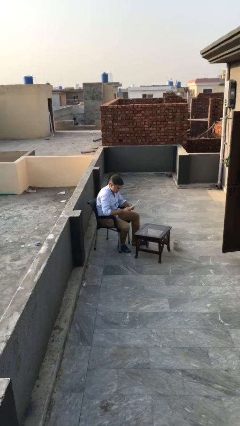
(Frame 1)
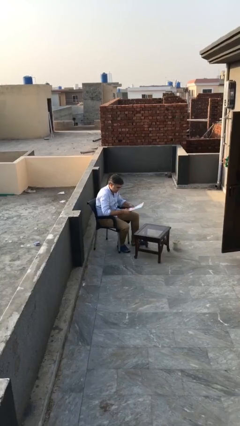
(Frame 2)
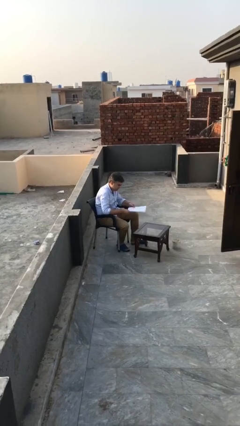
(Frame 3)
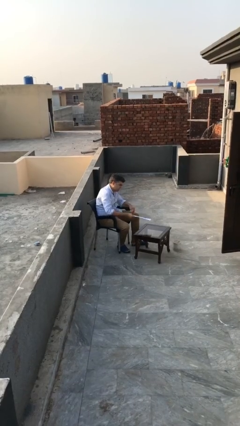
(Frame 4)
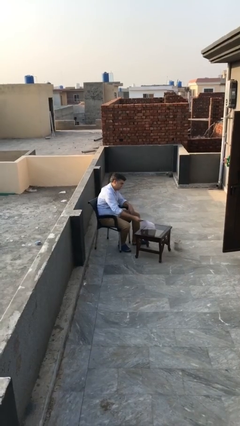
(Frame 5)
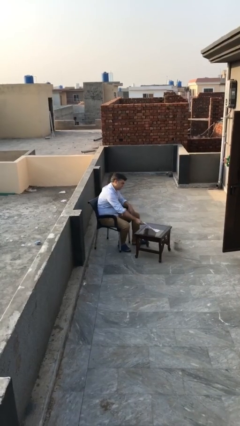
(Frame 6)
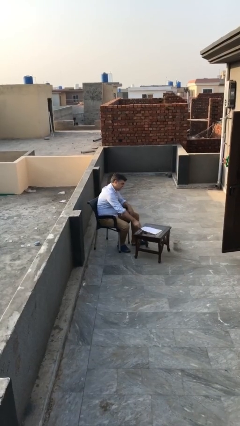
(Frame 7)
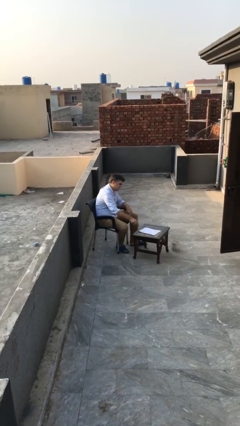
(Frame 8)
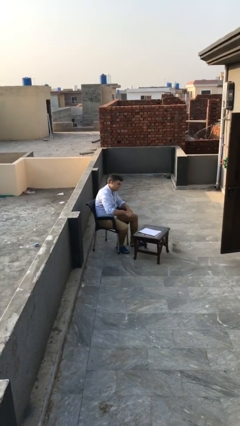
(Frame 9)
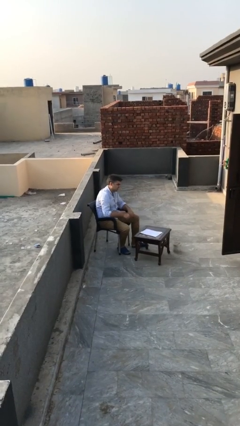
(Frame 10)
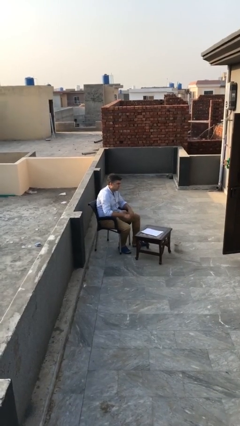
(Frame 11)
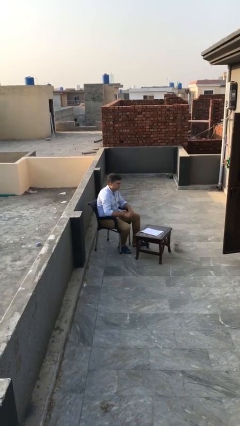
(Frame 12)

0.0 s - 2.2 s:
person puts down object on table

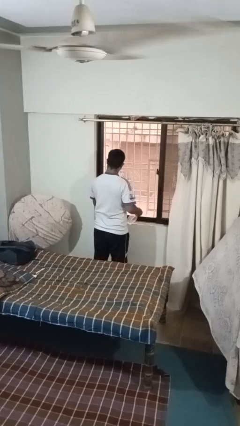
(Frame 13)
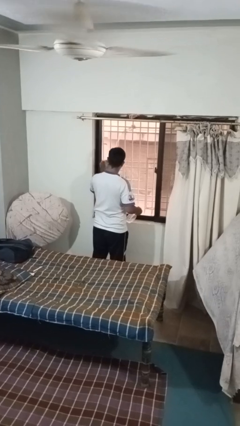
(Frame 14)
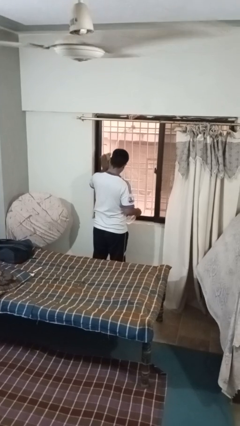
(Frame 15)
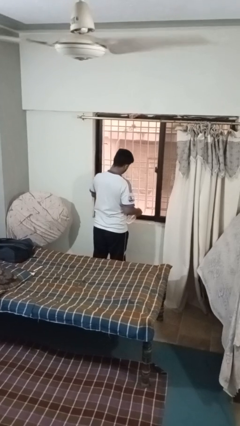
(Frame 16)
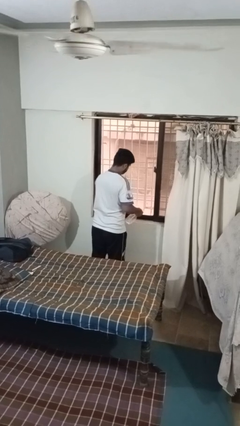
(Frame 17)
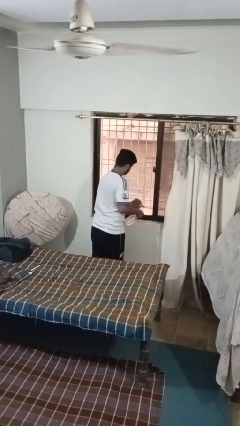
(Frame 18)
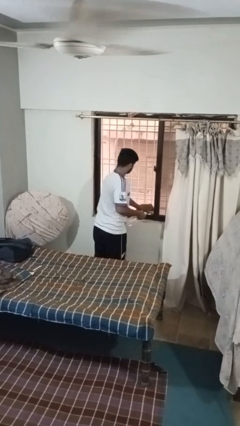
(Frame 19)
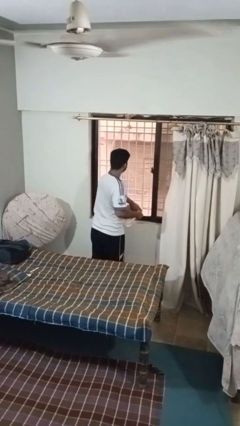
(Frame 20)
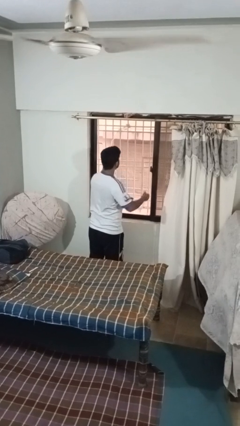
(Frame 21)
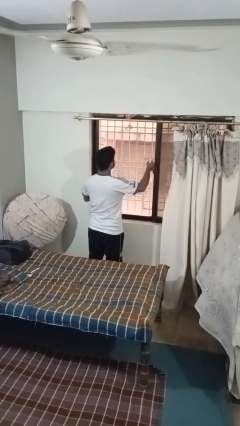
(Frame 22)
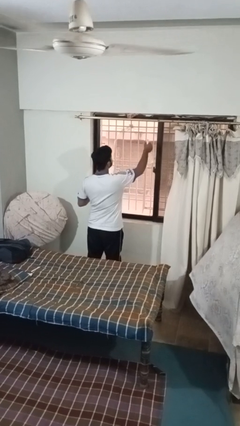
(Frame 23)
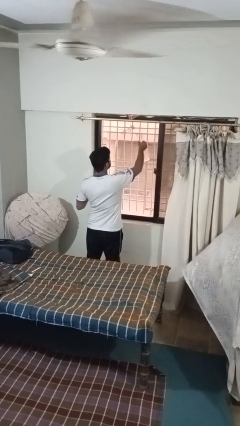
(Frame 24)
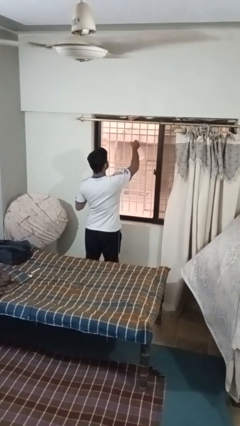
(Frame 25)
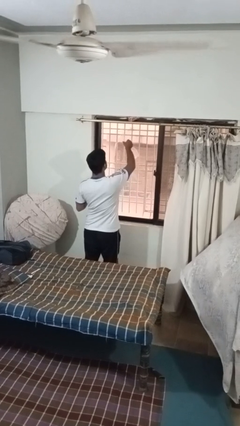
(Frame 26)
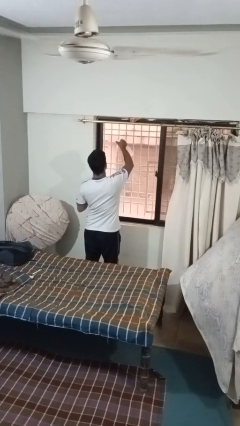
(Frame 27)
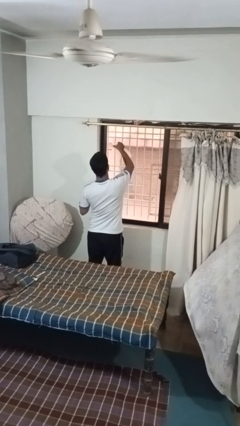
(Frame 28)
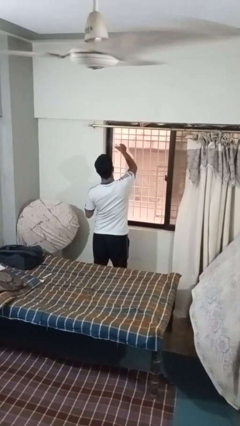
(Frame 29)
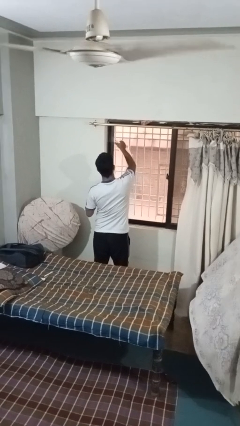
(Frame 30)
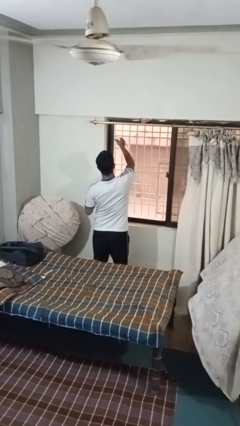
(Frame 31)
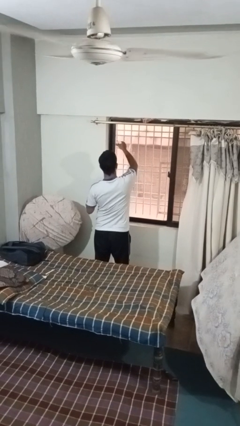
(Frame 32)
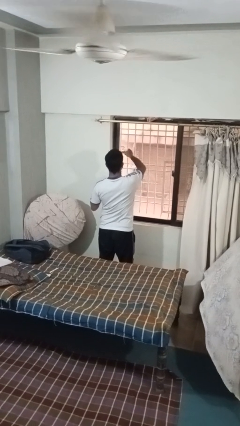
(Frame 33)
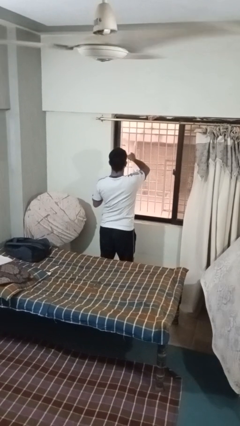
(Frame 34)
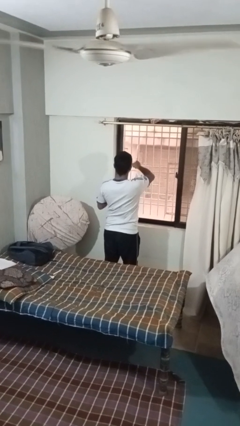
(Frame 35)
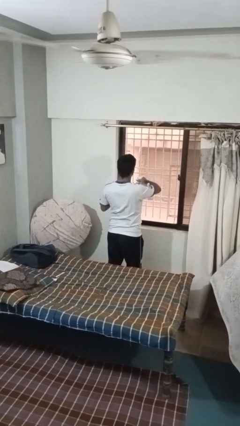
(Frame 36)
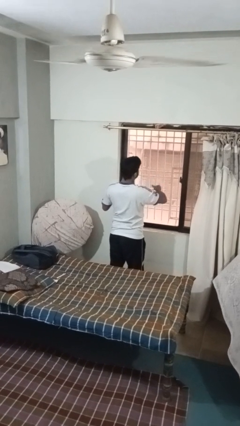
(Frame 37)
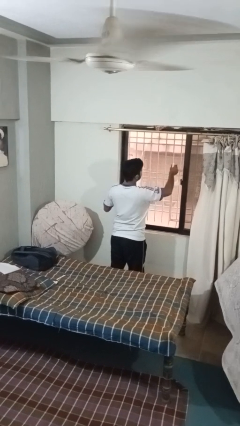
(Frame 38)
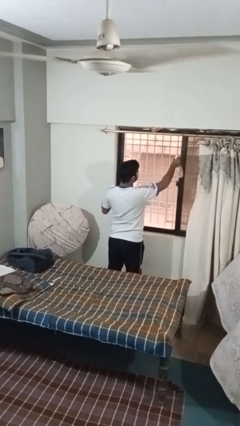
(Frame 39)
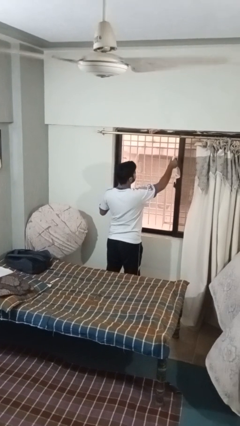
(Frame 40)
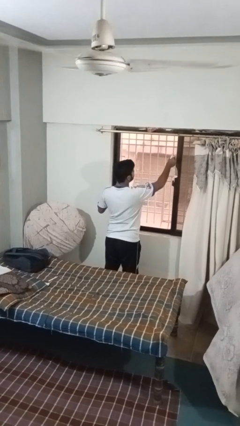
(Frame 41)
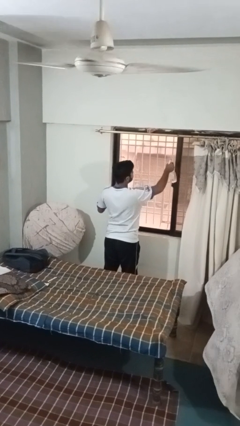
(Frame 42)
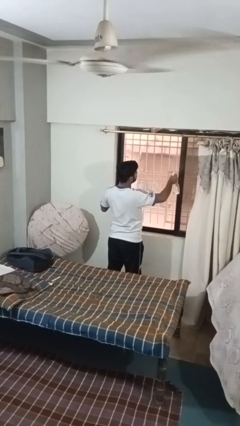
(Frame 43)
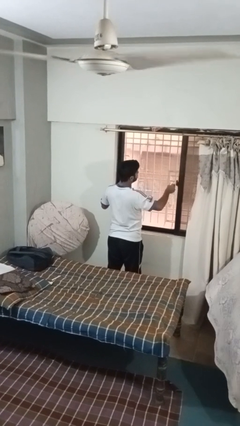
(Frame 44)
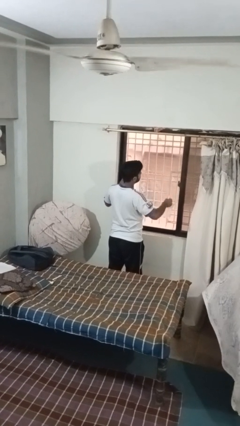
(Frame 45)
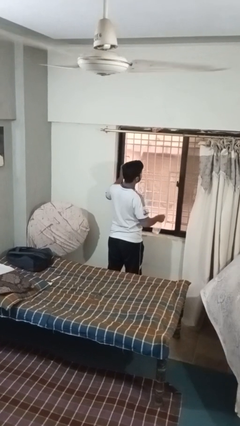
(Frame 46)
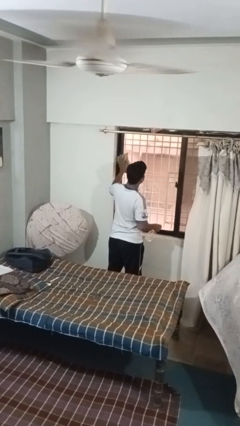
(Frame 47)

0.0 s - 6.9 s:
person sprays from bottle

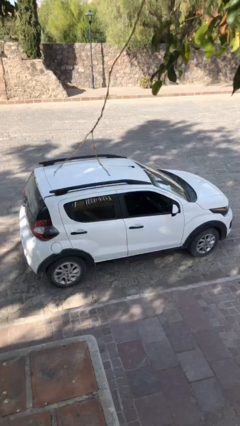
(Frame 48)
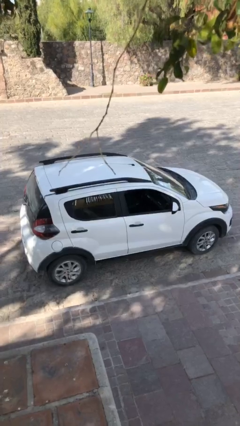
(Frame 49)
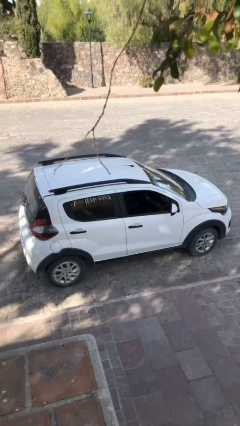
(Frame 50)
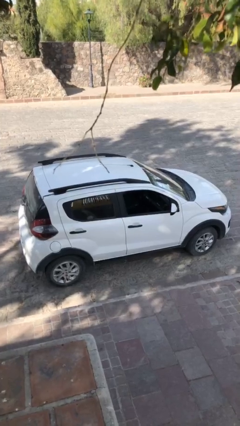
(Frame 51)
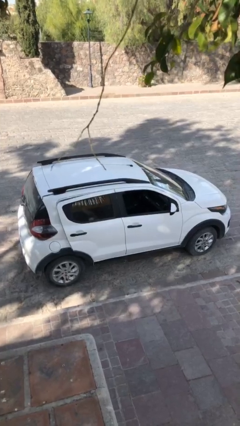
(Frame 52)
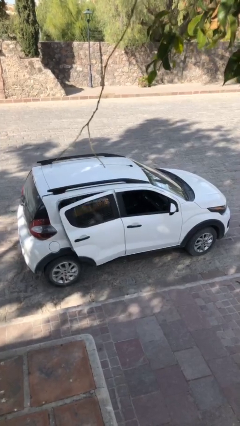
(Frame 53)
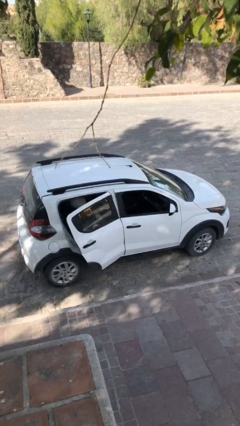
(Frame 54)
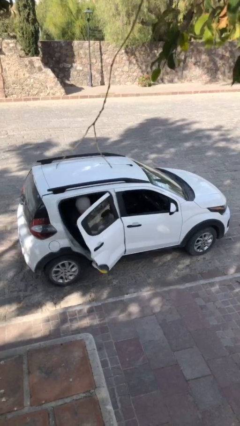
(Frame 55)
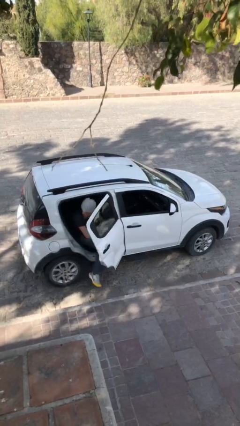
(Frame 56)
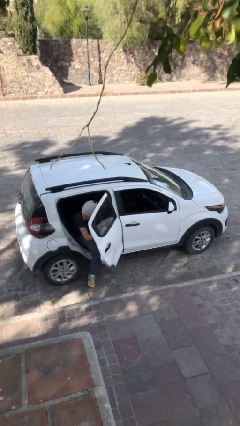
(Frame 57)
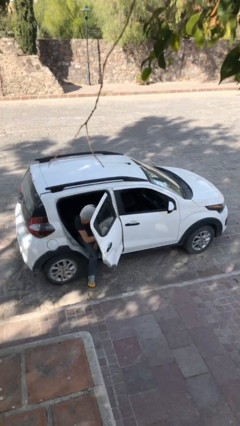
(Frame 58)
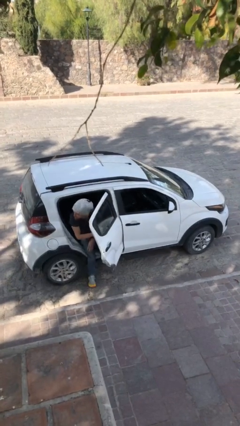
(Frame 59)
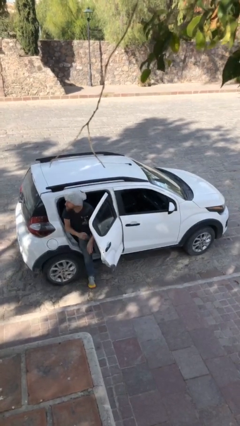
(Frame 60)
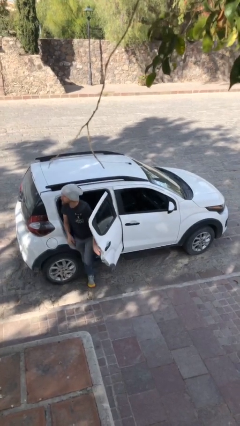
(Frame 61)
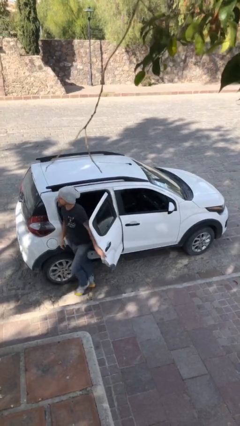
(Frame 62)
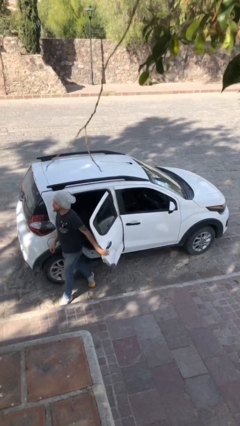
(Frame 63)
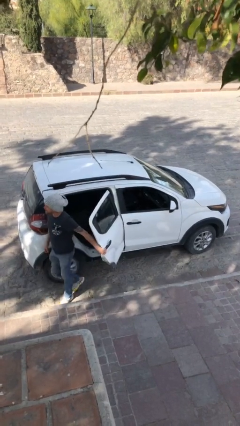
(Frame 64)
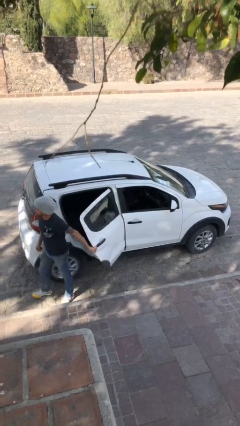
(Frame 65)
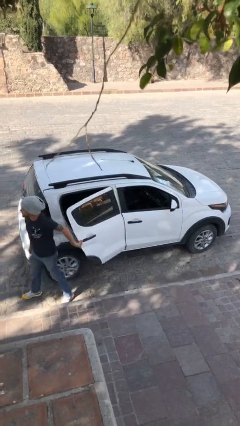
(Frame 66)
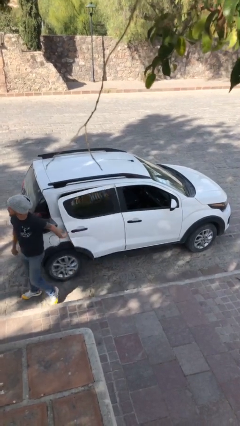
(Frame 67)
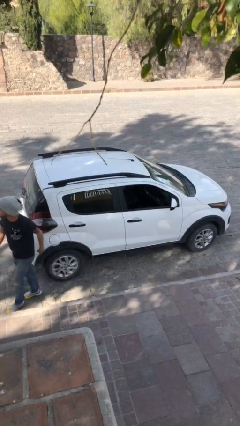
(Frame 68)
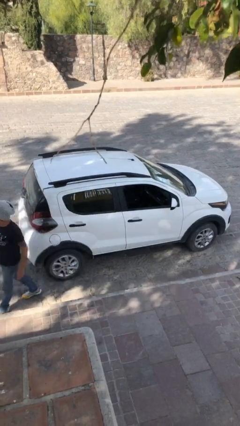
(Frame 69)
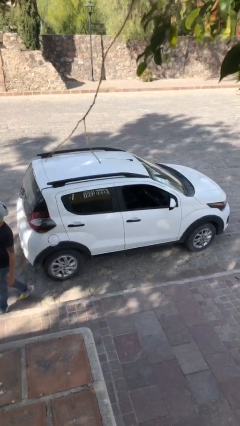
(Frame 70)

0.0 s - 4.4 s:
car drops off person

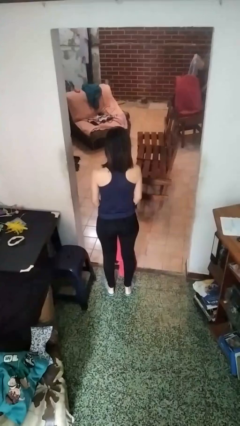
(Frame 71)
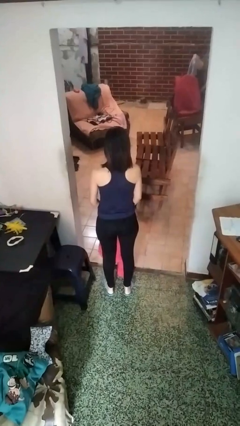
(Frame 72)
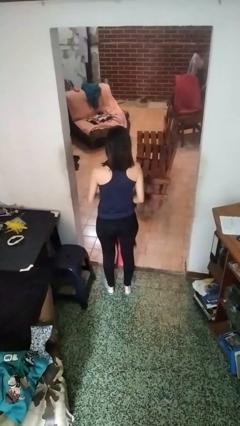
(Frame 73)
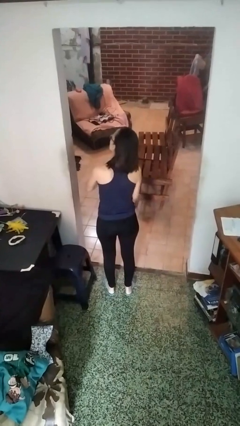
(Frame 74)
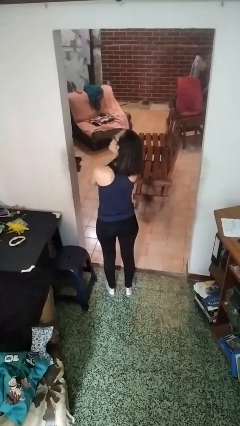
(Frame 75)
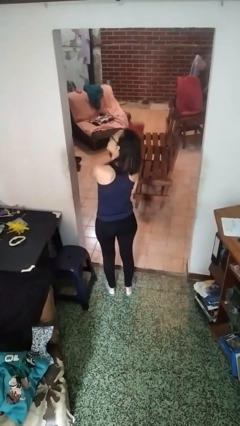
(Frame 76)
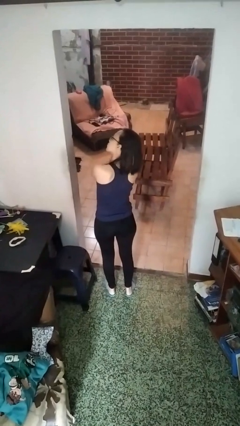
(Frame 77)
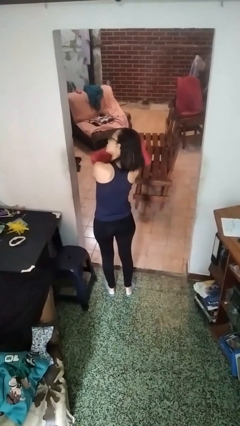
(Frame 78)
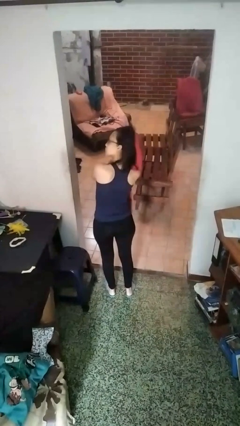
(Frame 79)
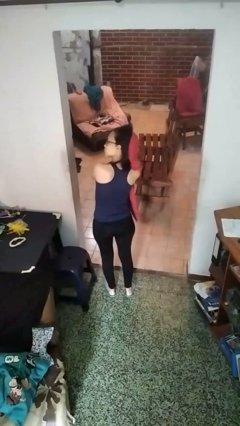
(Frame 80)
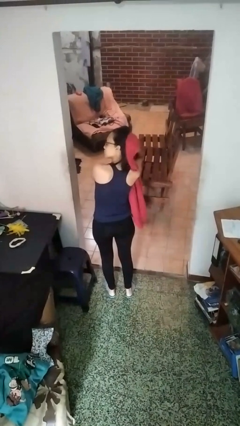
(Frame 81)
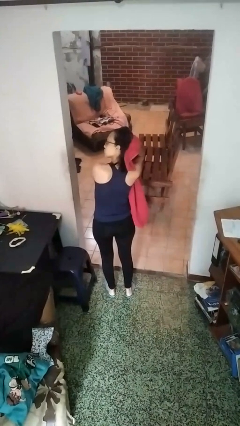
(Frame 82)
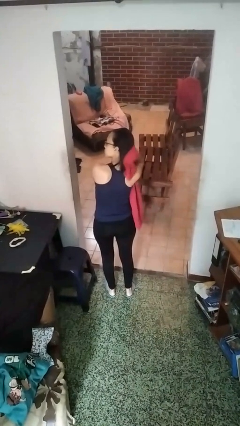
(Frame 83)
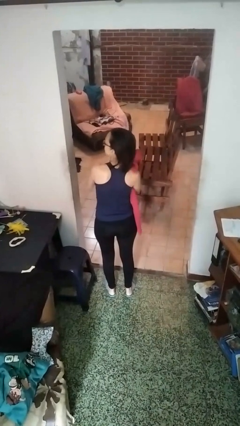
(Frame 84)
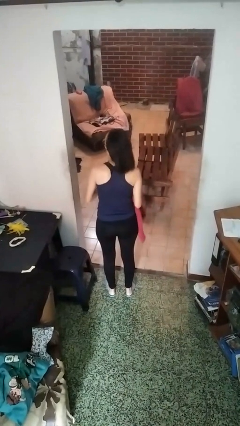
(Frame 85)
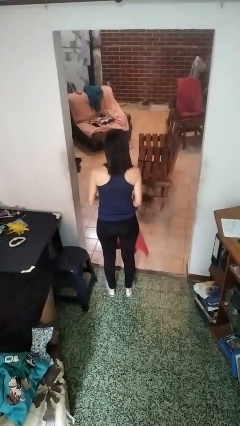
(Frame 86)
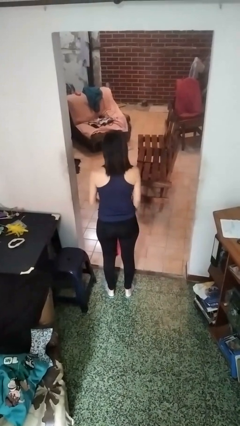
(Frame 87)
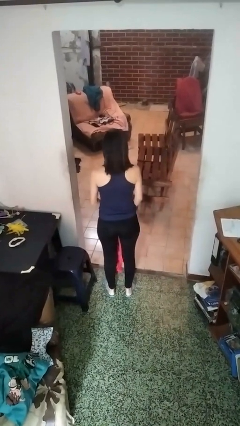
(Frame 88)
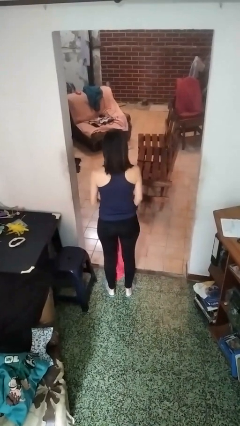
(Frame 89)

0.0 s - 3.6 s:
person dries hair with towel

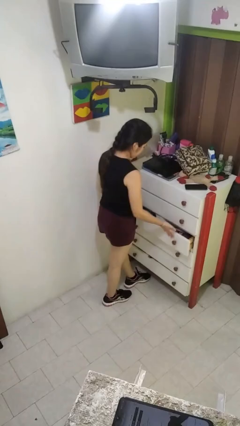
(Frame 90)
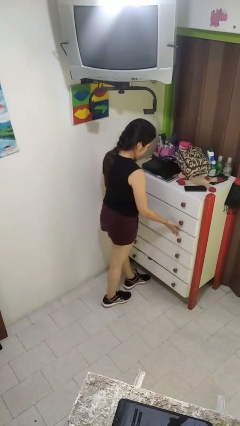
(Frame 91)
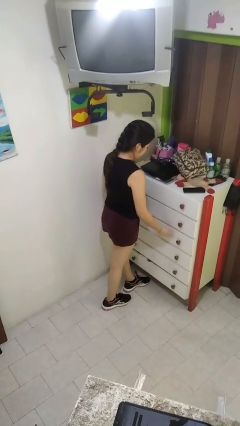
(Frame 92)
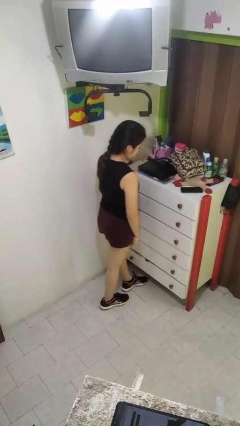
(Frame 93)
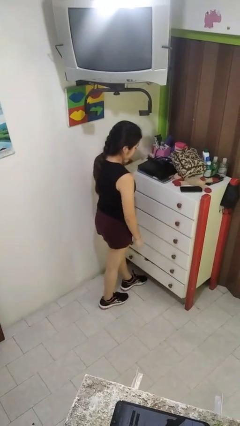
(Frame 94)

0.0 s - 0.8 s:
person closes dresser drawer
